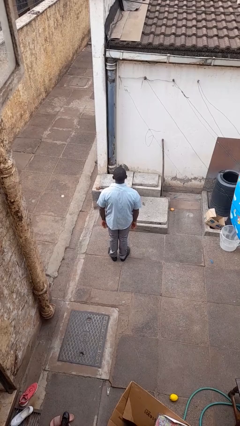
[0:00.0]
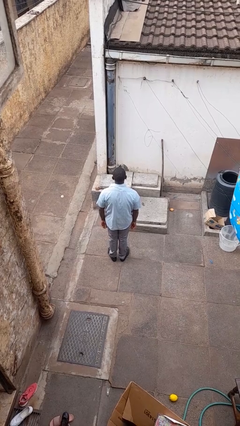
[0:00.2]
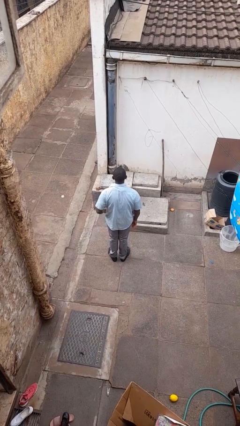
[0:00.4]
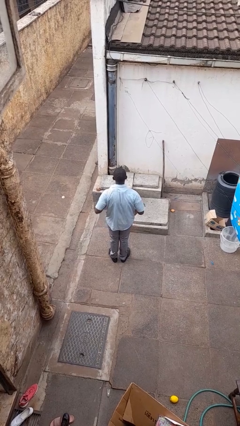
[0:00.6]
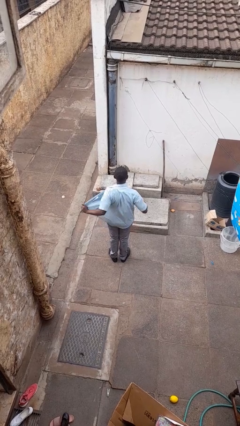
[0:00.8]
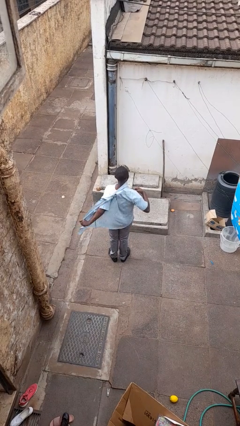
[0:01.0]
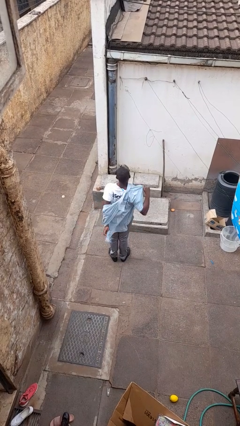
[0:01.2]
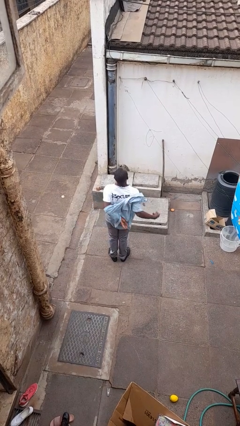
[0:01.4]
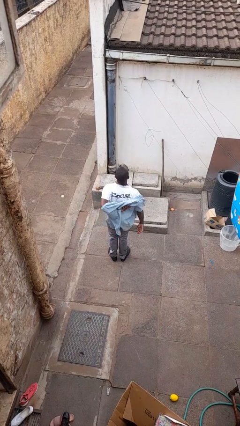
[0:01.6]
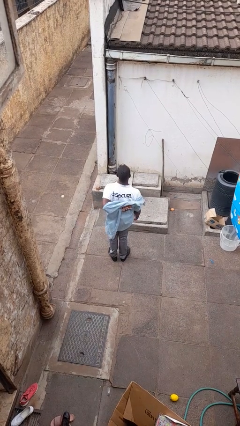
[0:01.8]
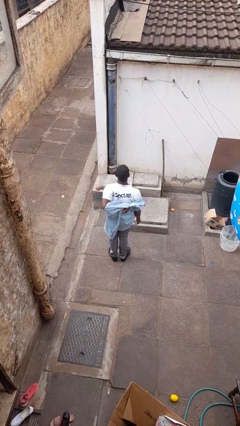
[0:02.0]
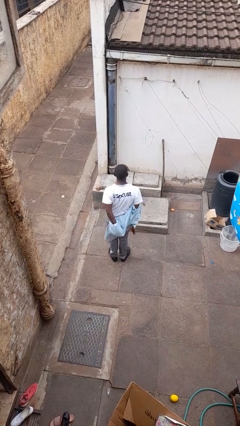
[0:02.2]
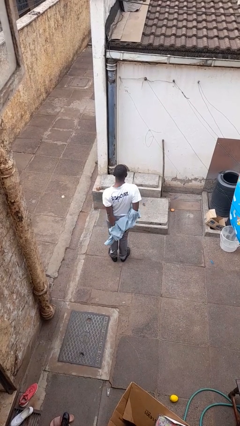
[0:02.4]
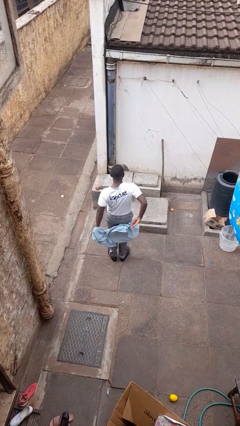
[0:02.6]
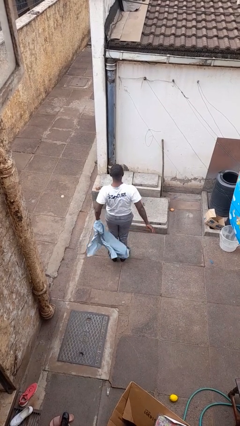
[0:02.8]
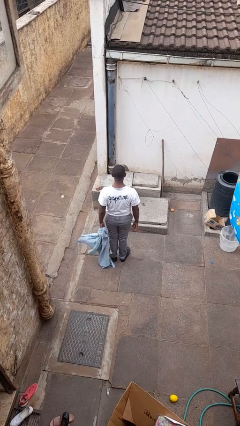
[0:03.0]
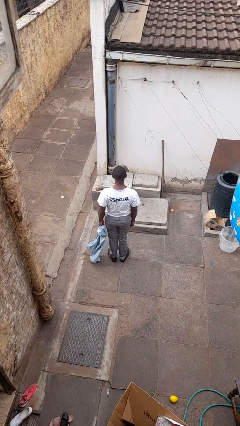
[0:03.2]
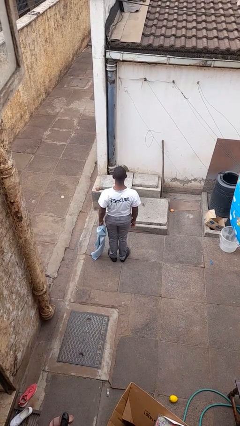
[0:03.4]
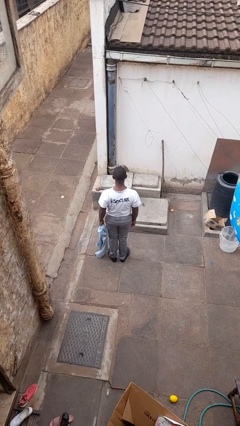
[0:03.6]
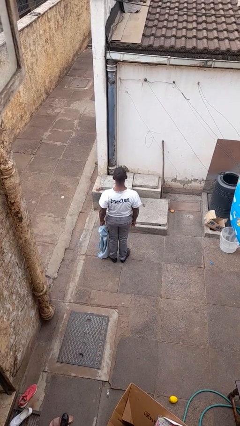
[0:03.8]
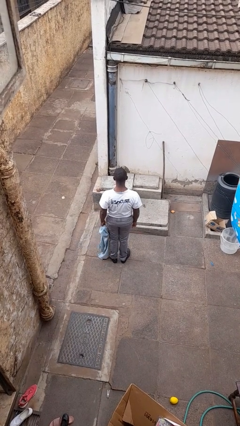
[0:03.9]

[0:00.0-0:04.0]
person takes off shirt

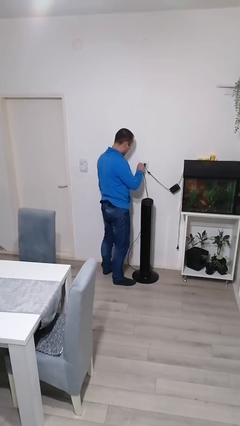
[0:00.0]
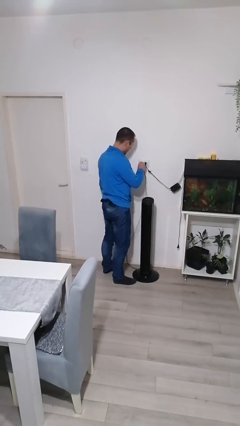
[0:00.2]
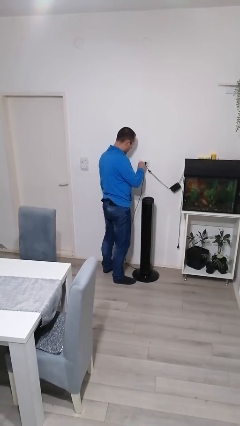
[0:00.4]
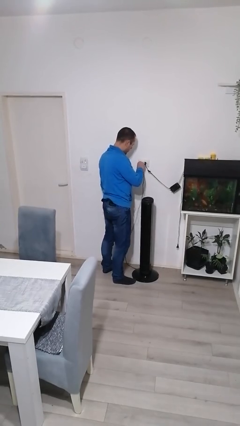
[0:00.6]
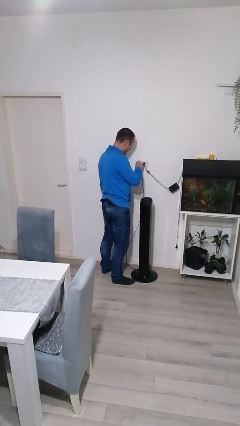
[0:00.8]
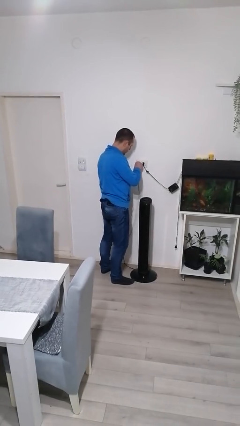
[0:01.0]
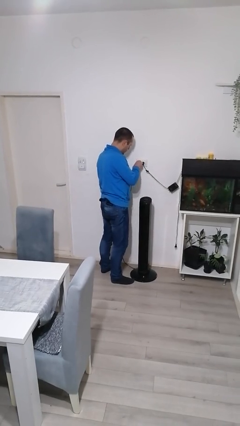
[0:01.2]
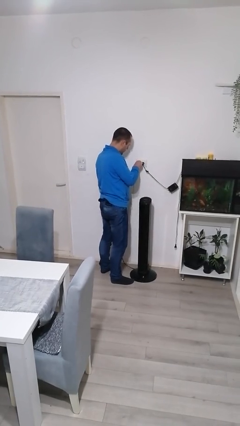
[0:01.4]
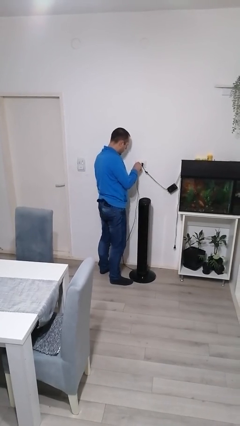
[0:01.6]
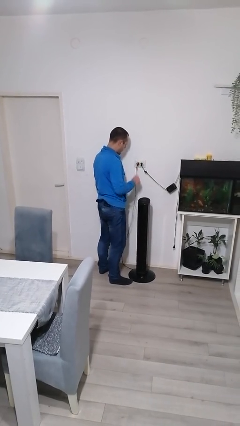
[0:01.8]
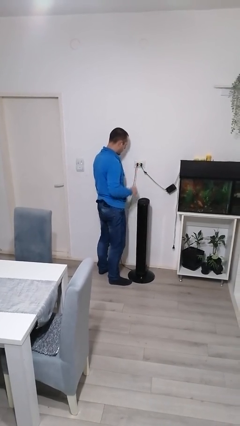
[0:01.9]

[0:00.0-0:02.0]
person plugs into electrical socket

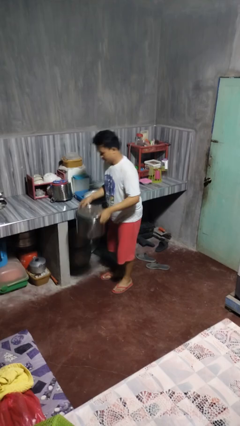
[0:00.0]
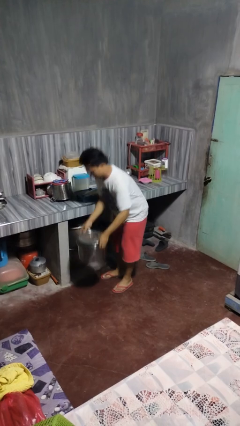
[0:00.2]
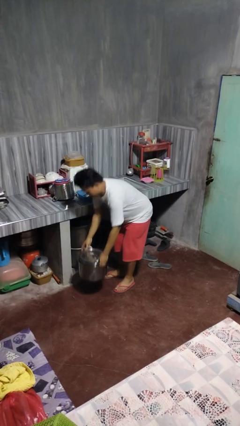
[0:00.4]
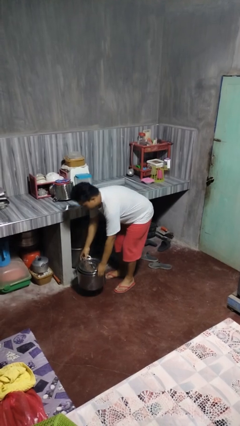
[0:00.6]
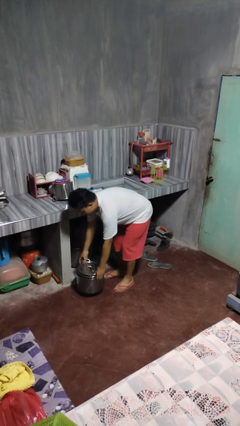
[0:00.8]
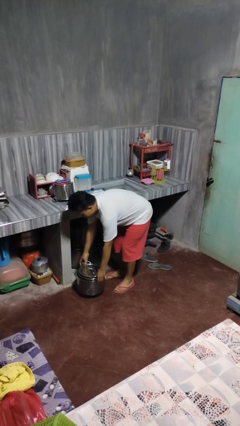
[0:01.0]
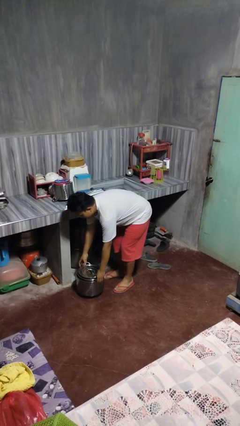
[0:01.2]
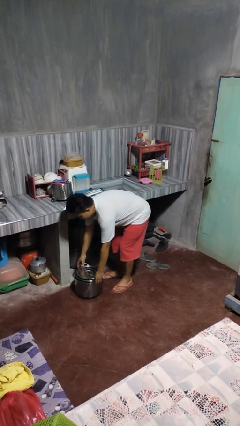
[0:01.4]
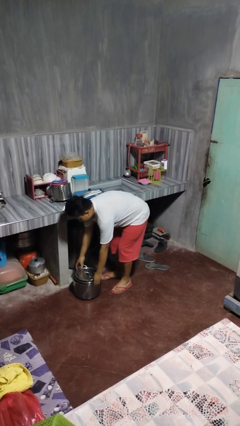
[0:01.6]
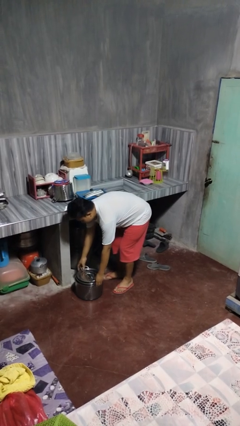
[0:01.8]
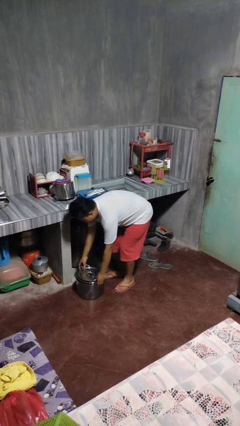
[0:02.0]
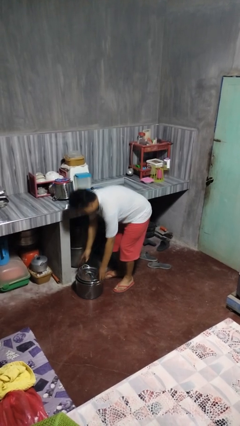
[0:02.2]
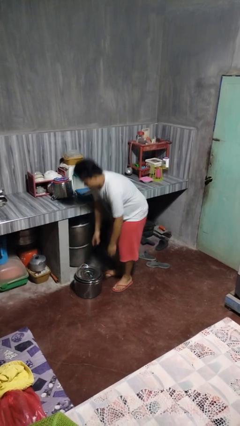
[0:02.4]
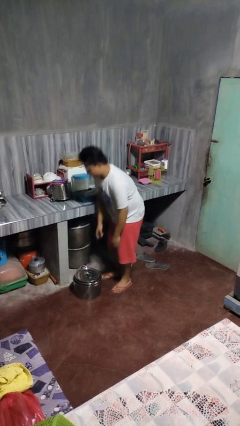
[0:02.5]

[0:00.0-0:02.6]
person puts down object on countertop

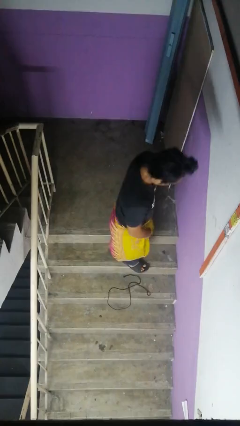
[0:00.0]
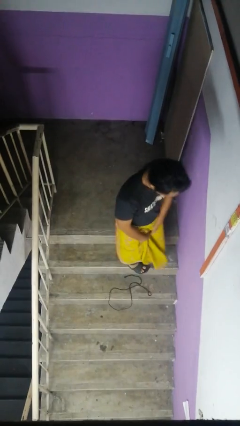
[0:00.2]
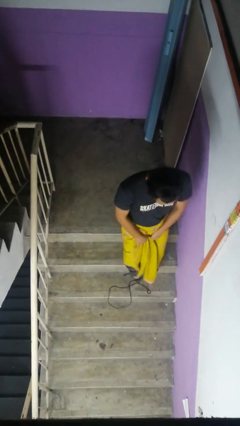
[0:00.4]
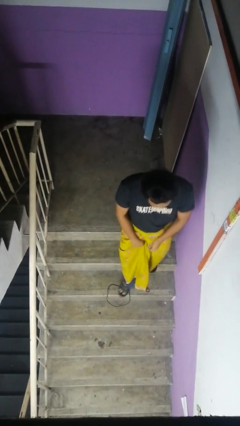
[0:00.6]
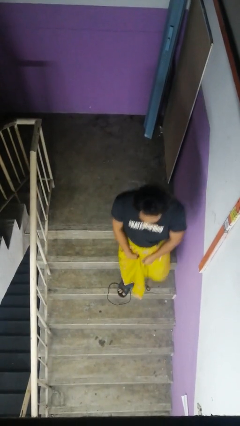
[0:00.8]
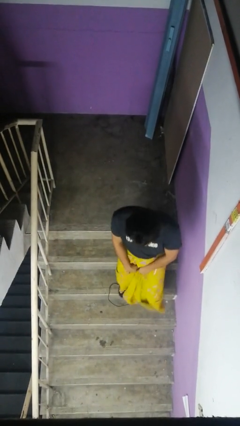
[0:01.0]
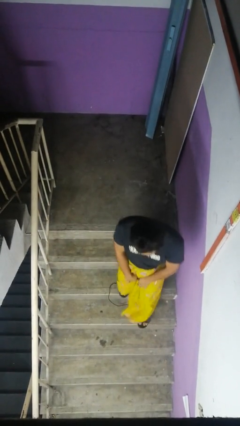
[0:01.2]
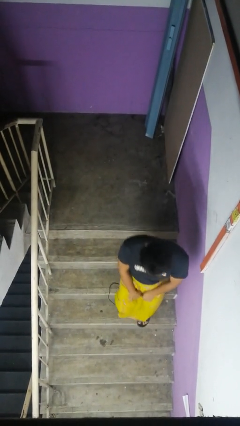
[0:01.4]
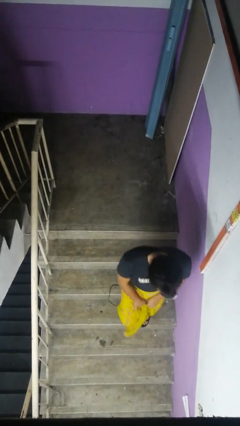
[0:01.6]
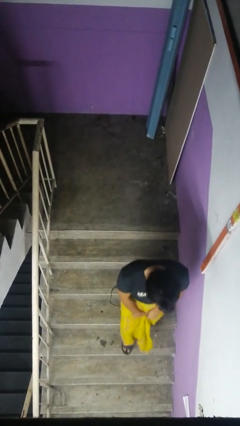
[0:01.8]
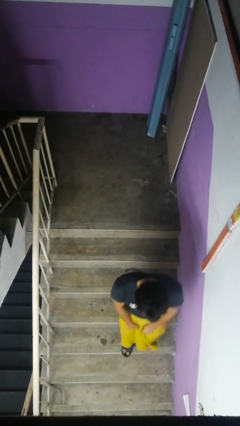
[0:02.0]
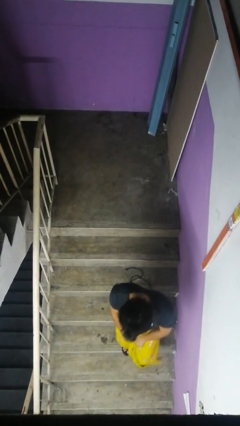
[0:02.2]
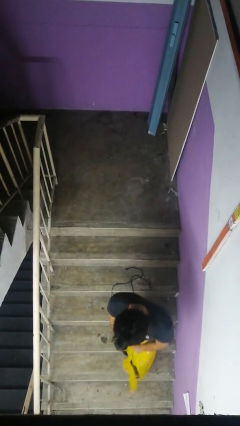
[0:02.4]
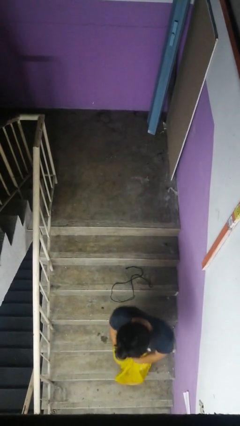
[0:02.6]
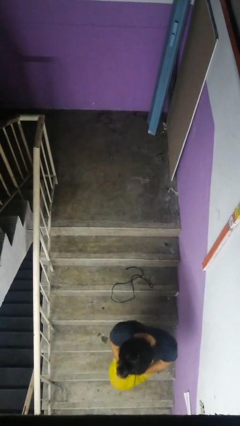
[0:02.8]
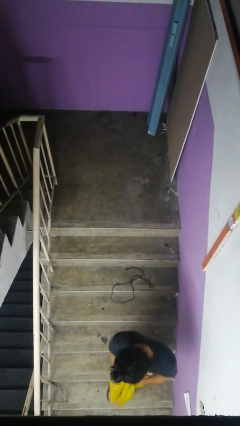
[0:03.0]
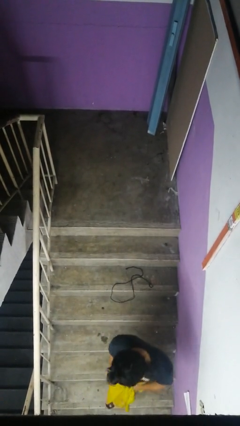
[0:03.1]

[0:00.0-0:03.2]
person climbs down stairs

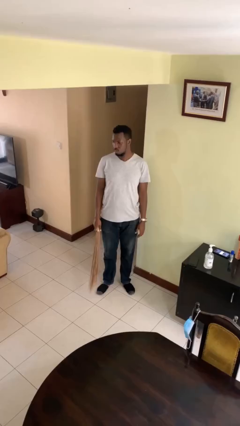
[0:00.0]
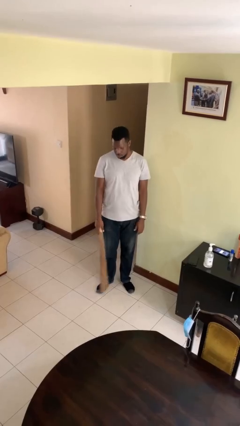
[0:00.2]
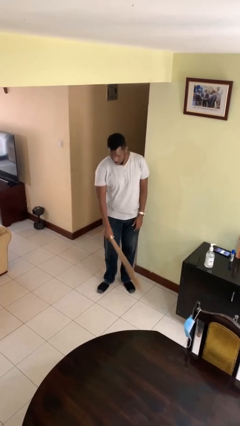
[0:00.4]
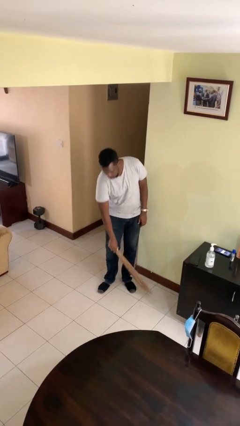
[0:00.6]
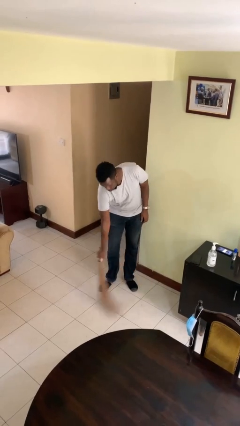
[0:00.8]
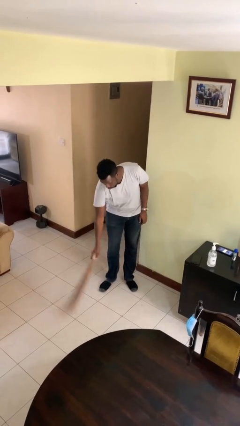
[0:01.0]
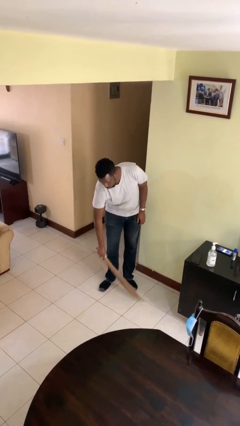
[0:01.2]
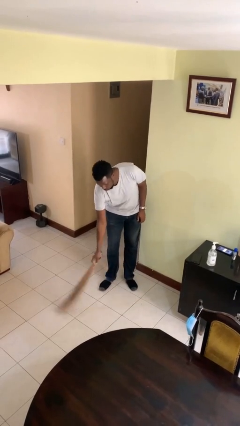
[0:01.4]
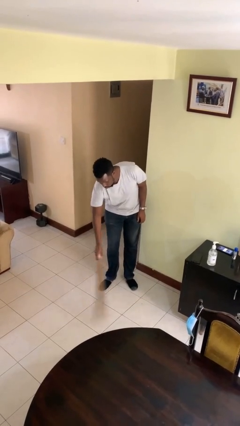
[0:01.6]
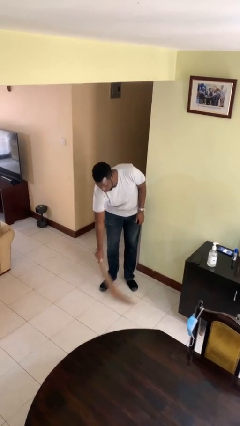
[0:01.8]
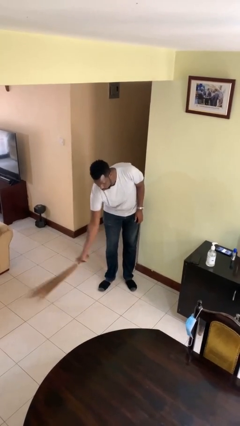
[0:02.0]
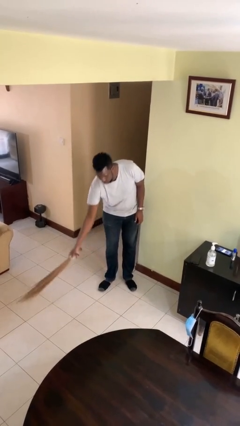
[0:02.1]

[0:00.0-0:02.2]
person sweeps floor

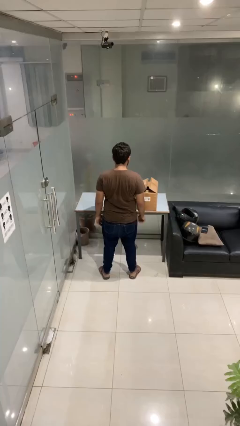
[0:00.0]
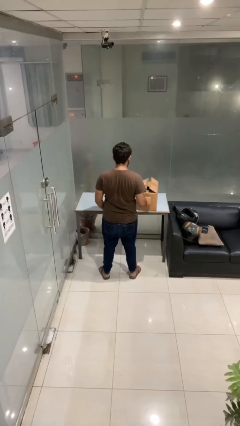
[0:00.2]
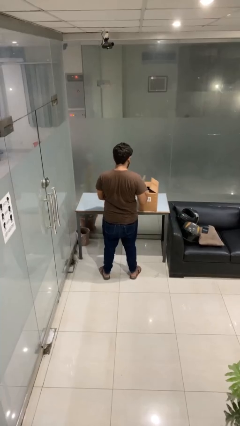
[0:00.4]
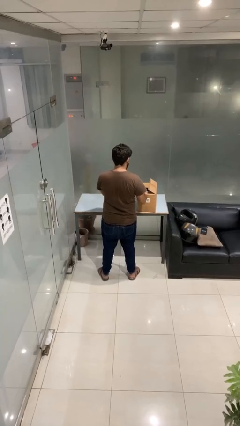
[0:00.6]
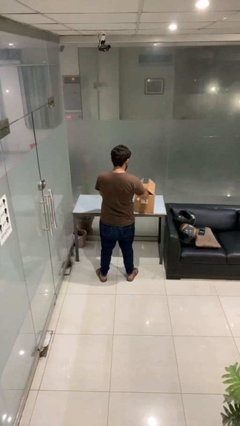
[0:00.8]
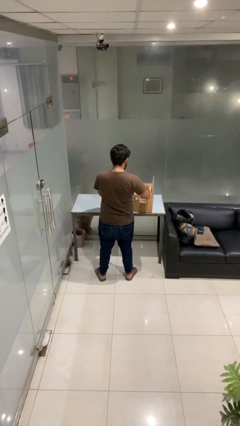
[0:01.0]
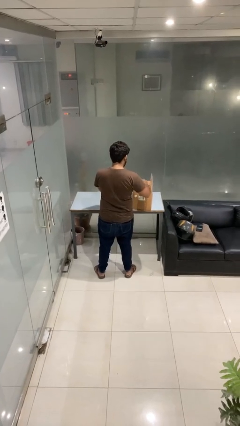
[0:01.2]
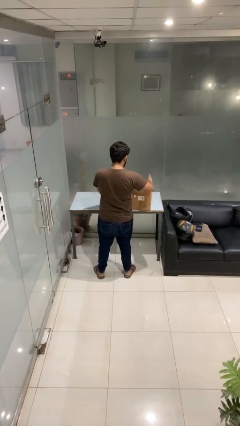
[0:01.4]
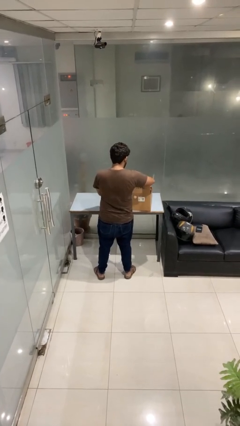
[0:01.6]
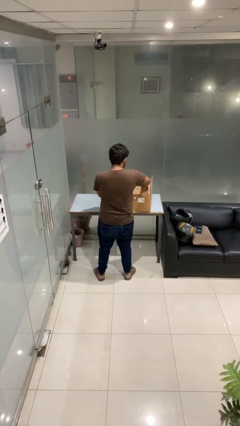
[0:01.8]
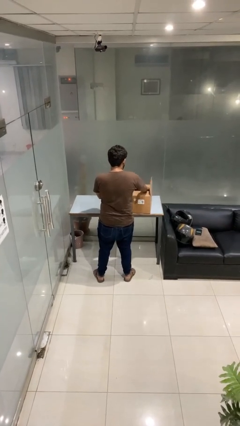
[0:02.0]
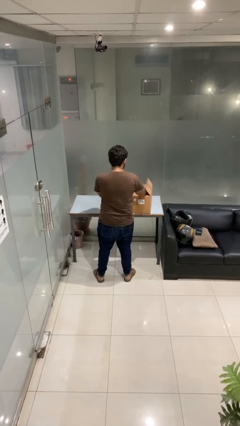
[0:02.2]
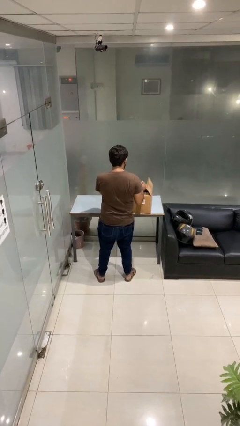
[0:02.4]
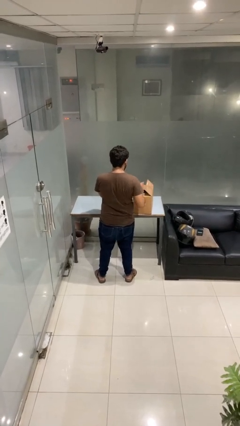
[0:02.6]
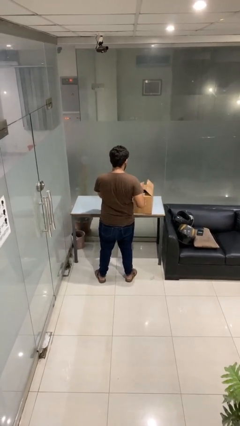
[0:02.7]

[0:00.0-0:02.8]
person searches in box

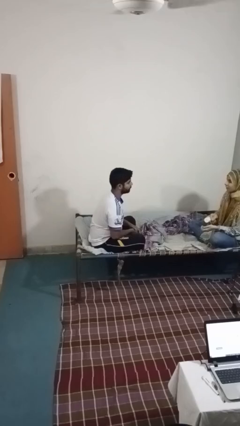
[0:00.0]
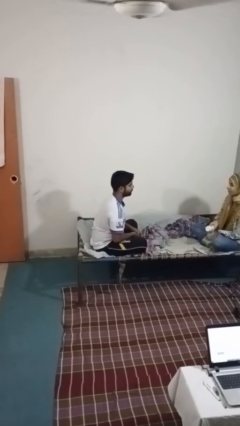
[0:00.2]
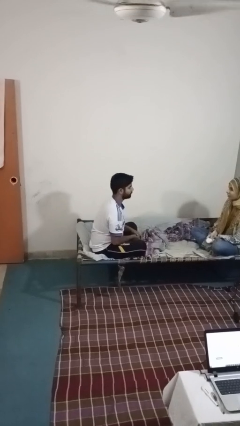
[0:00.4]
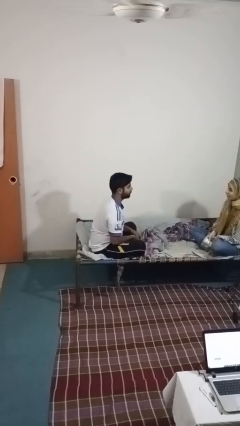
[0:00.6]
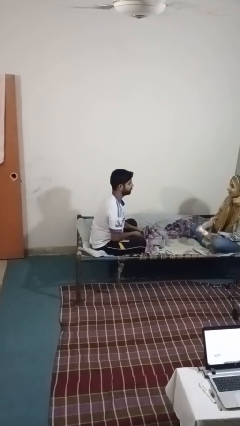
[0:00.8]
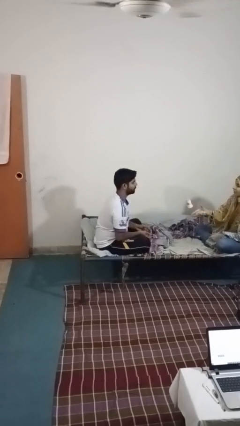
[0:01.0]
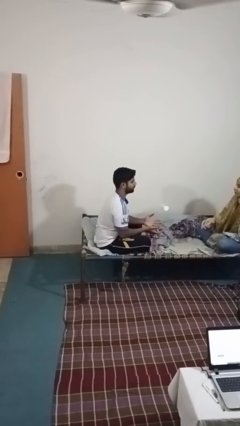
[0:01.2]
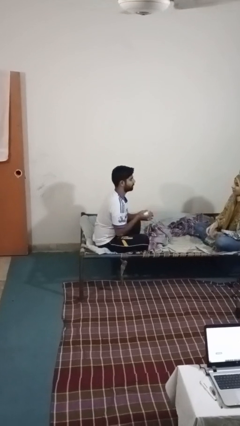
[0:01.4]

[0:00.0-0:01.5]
person catches object from person
